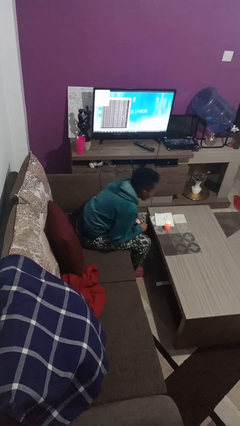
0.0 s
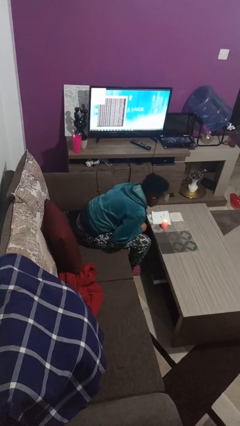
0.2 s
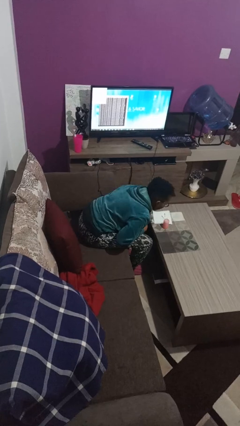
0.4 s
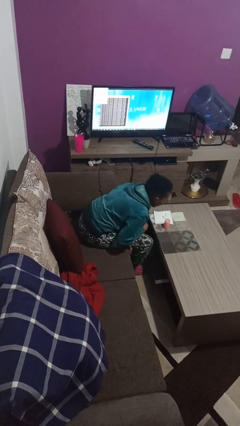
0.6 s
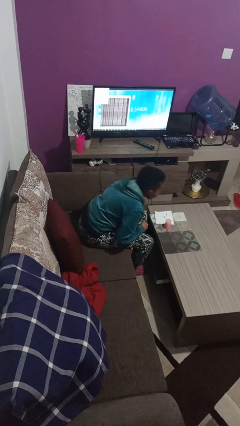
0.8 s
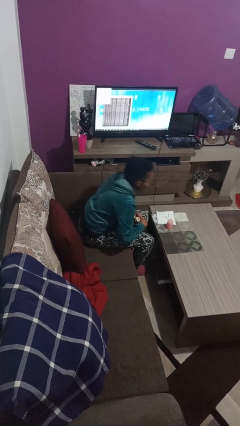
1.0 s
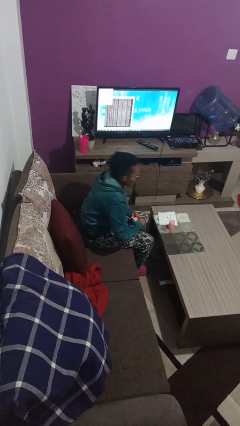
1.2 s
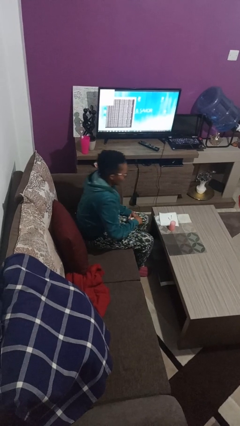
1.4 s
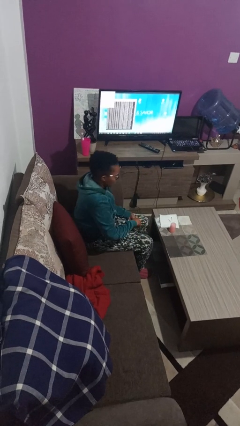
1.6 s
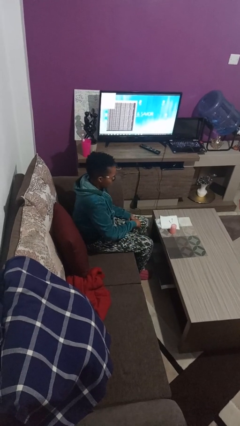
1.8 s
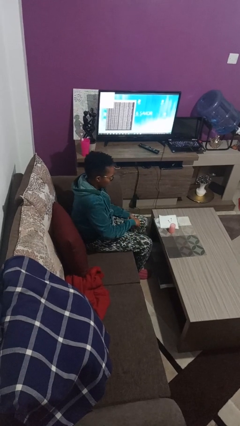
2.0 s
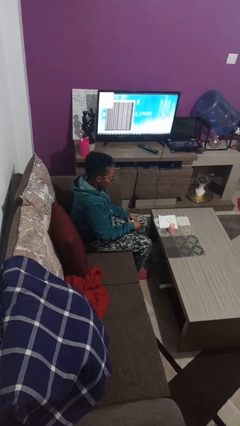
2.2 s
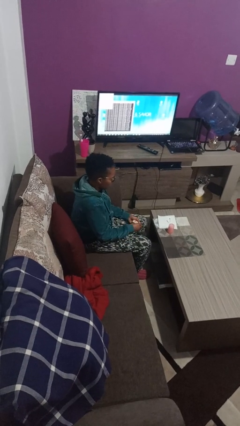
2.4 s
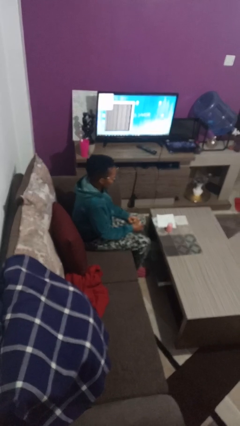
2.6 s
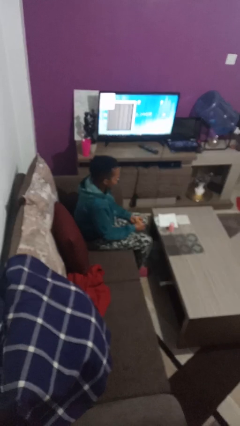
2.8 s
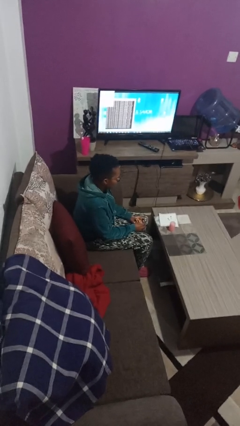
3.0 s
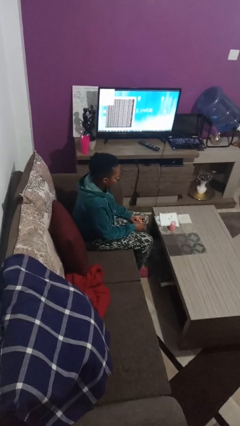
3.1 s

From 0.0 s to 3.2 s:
person extinguishes candle

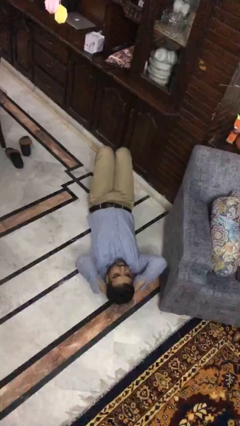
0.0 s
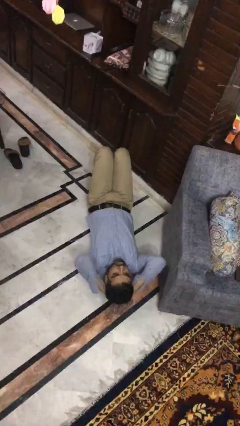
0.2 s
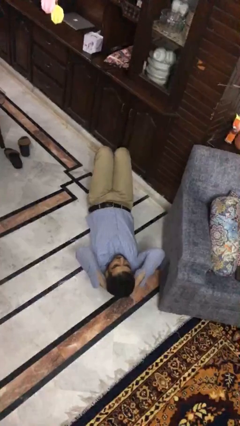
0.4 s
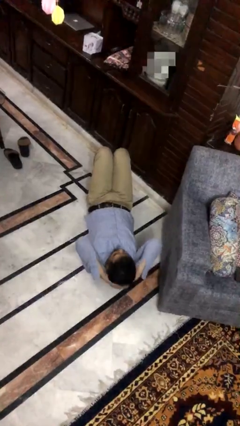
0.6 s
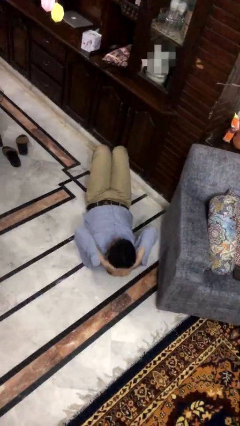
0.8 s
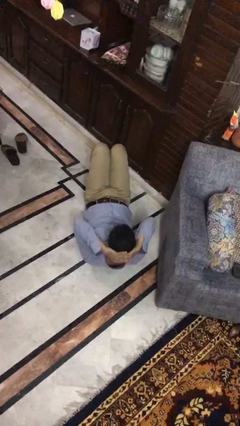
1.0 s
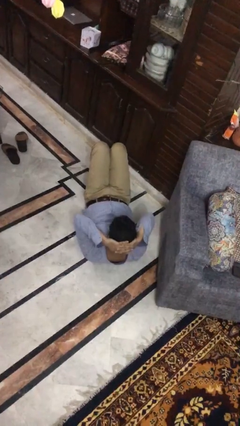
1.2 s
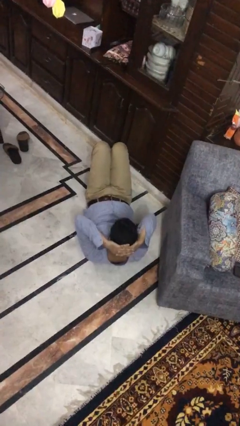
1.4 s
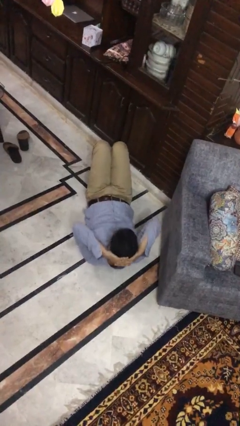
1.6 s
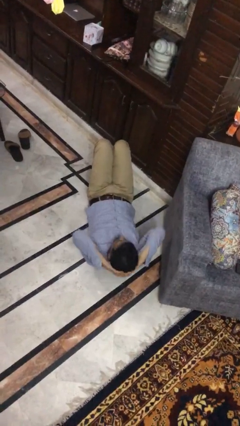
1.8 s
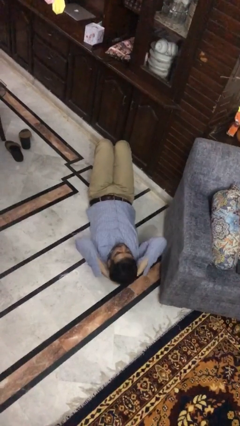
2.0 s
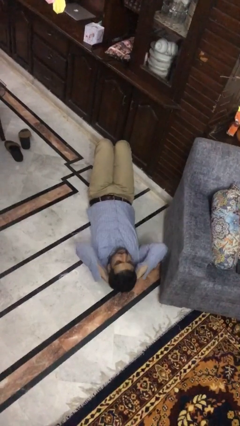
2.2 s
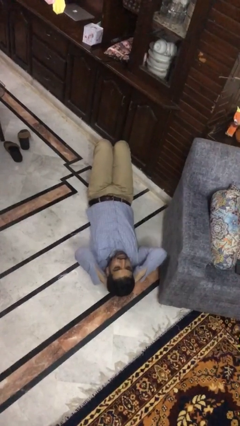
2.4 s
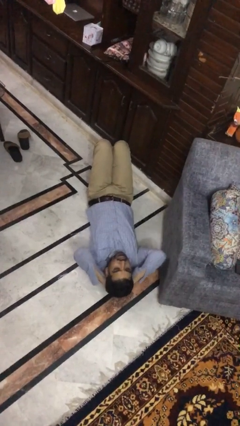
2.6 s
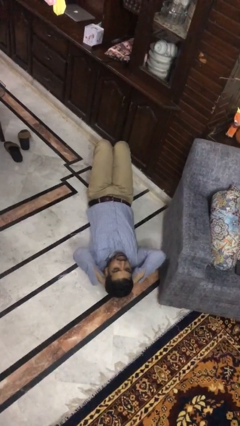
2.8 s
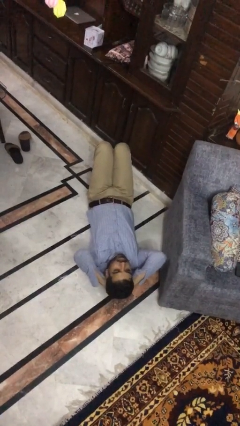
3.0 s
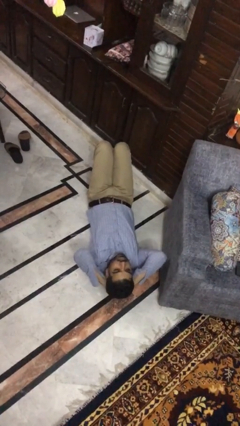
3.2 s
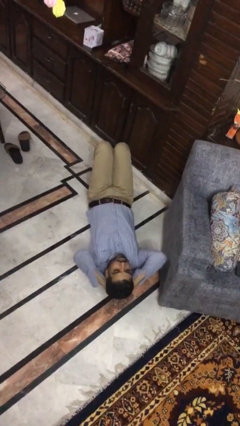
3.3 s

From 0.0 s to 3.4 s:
person exercises with situp

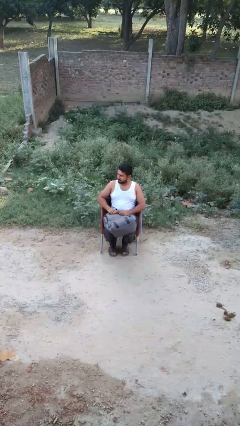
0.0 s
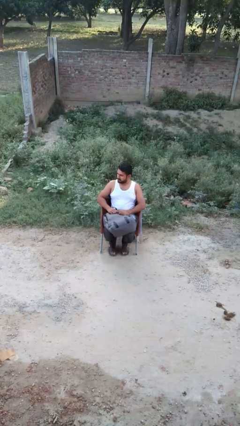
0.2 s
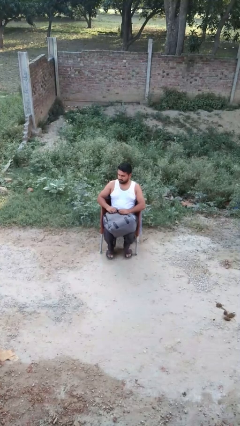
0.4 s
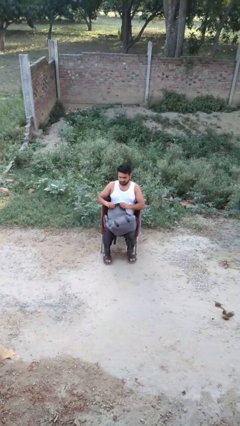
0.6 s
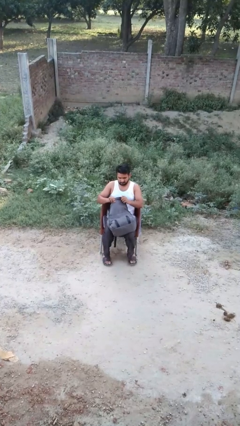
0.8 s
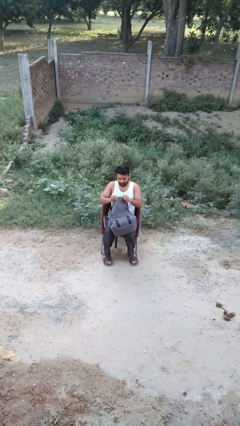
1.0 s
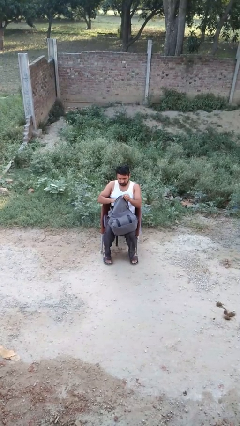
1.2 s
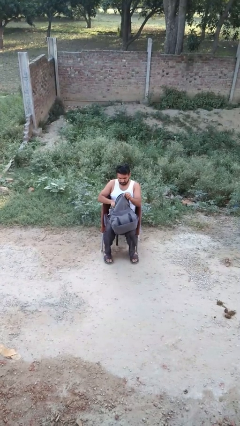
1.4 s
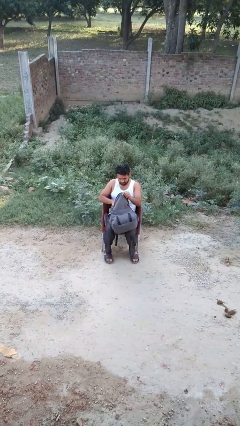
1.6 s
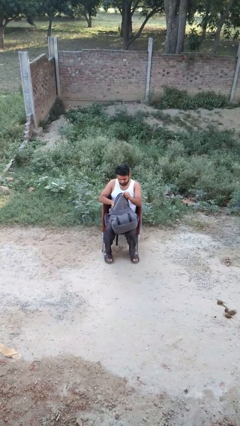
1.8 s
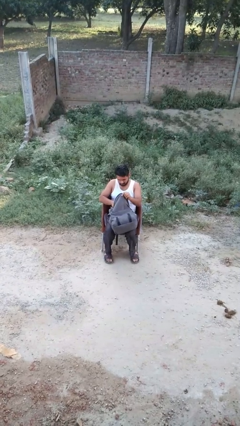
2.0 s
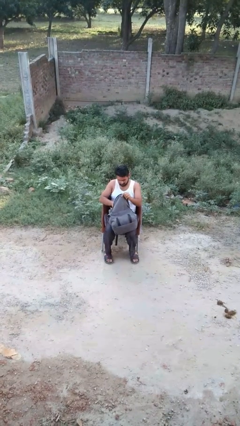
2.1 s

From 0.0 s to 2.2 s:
person searches in backpack

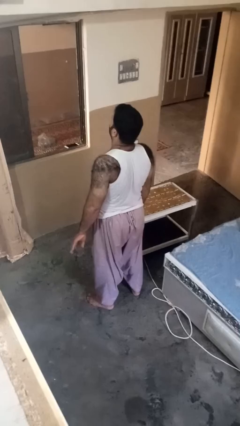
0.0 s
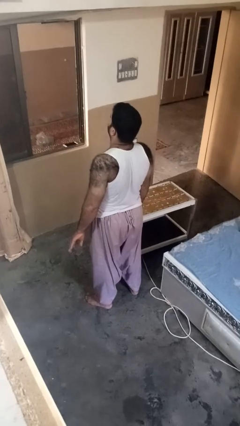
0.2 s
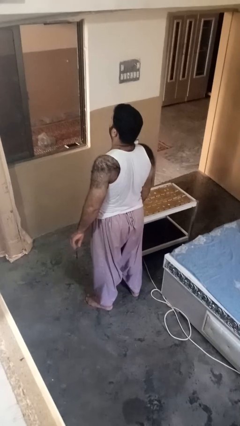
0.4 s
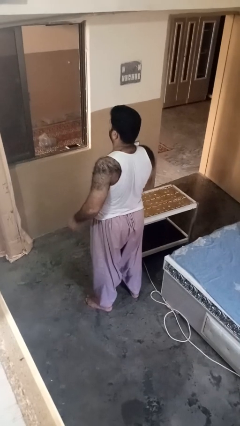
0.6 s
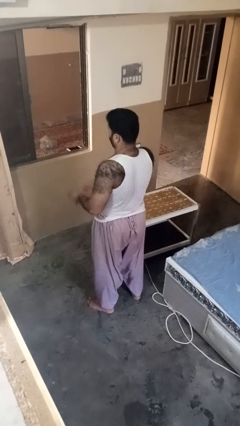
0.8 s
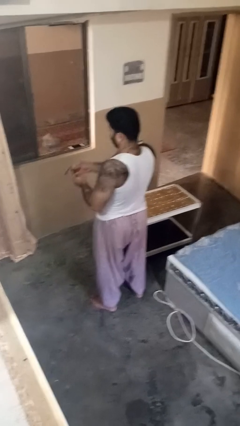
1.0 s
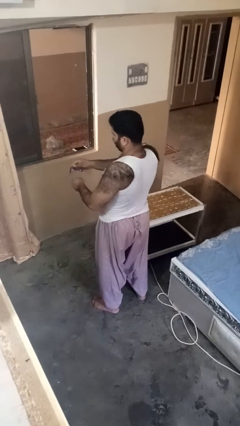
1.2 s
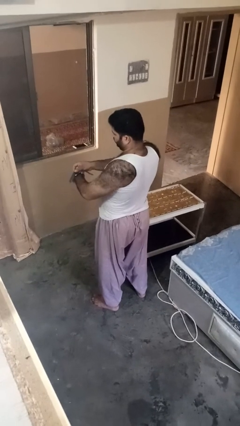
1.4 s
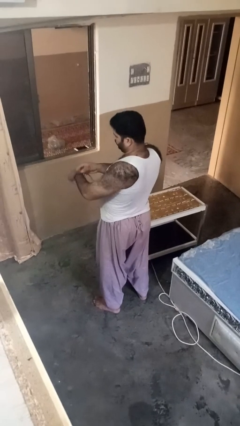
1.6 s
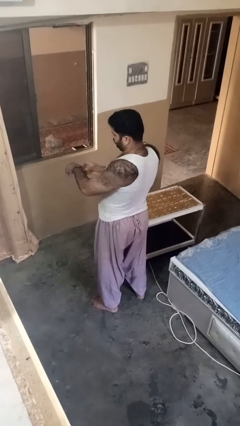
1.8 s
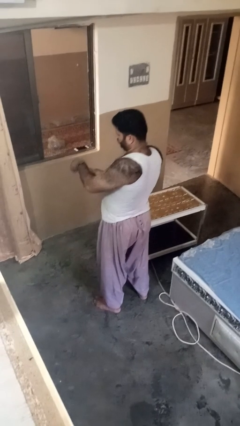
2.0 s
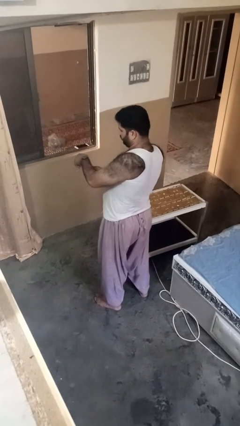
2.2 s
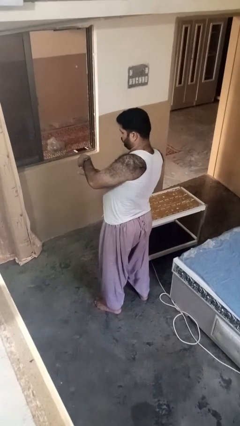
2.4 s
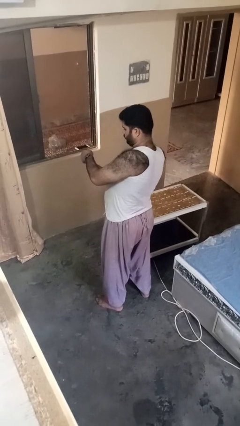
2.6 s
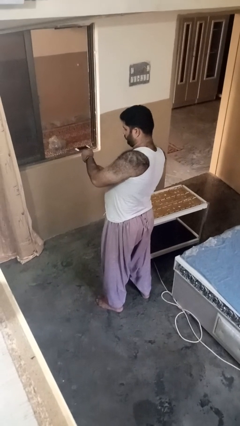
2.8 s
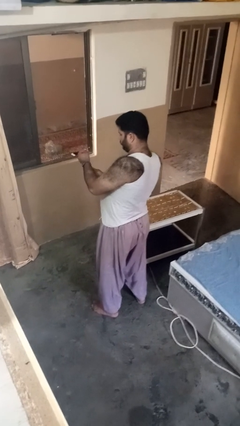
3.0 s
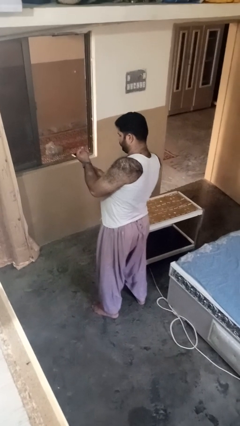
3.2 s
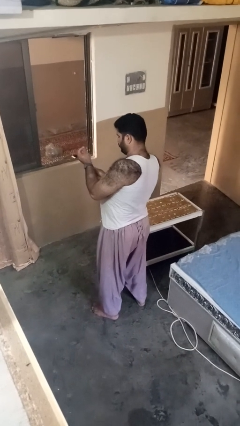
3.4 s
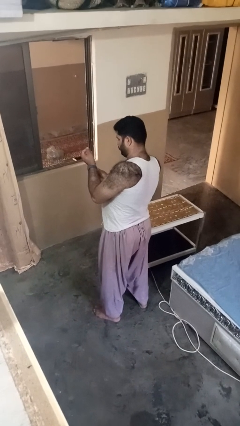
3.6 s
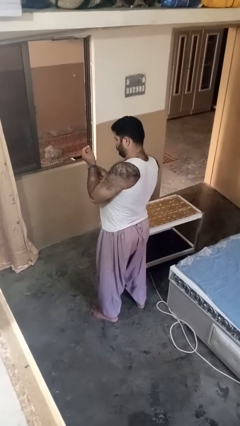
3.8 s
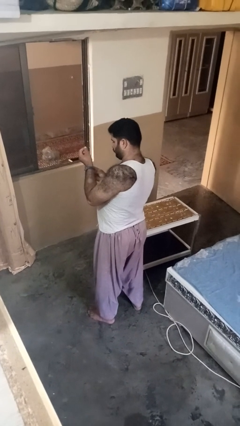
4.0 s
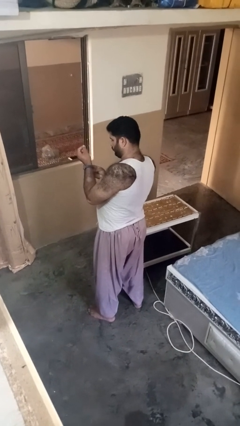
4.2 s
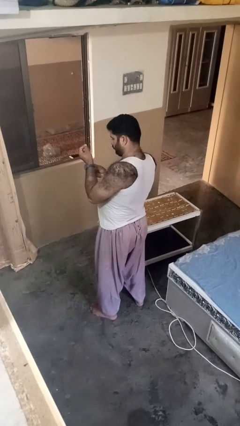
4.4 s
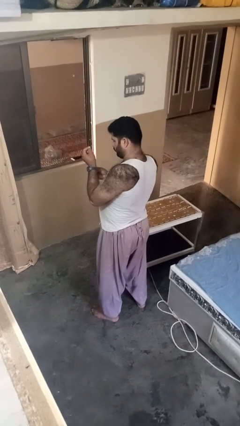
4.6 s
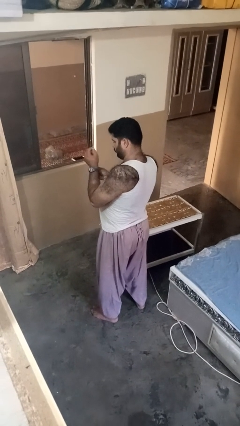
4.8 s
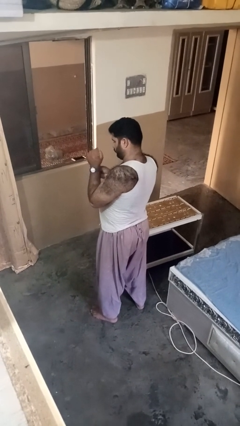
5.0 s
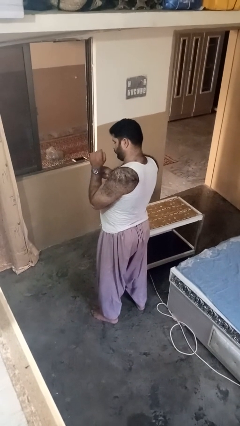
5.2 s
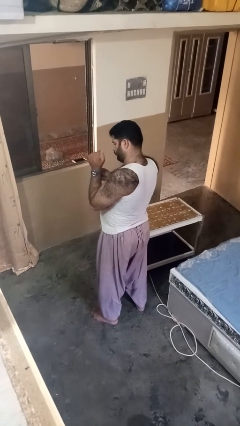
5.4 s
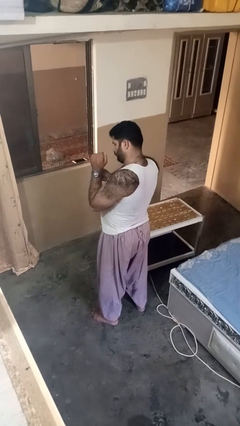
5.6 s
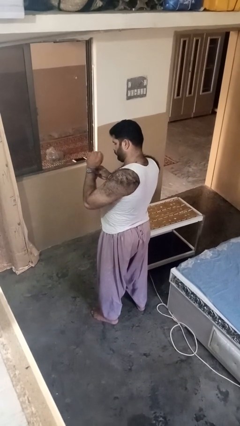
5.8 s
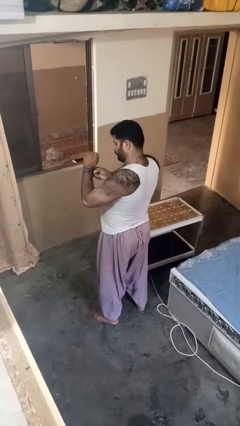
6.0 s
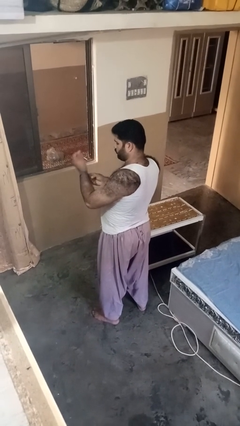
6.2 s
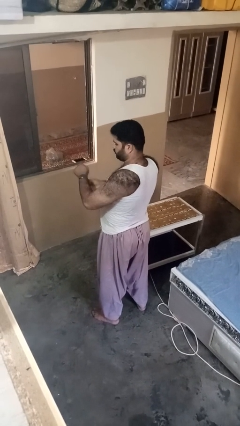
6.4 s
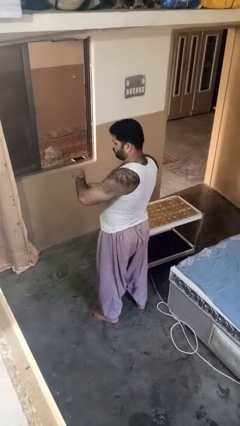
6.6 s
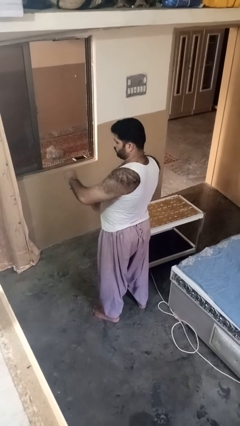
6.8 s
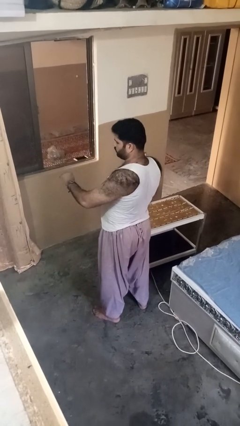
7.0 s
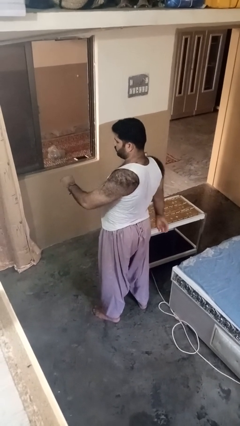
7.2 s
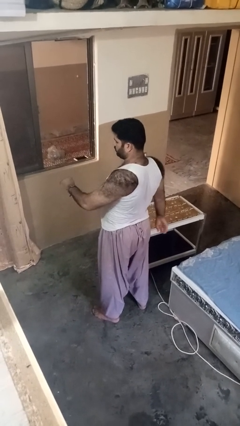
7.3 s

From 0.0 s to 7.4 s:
person puts on wristwatch

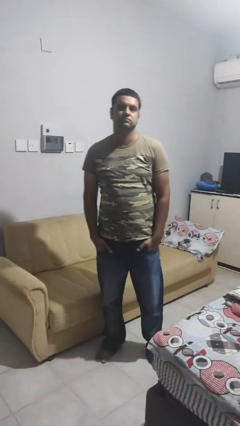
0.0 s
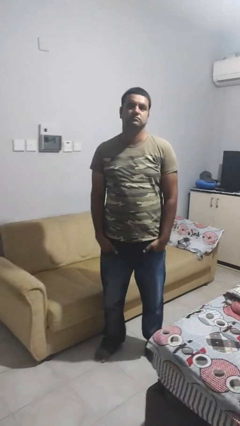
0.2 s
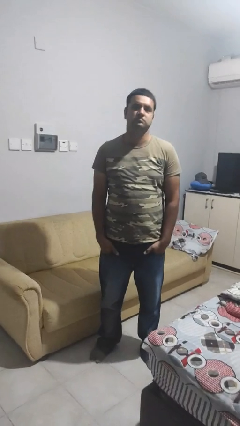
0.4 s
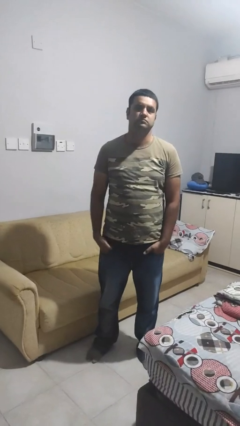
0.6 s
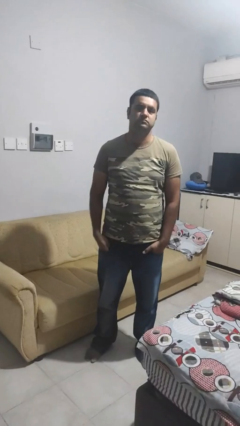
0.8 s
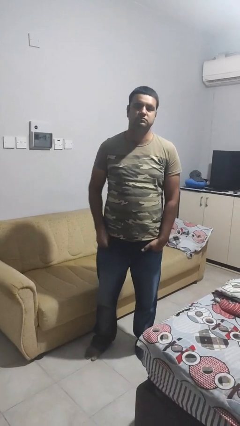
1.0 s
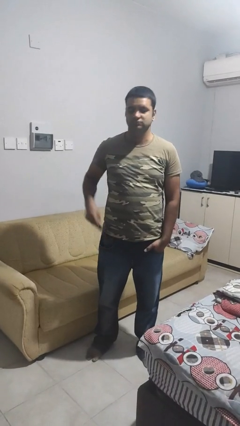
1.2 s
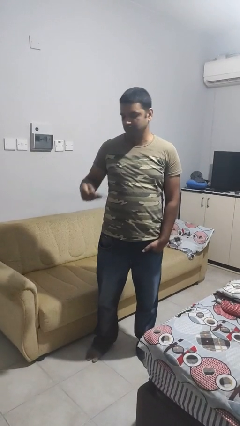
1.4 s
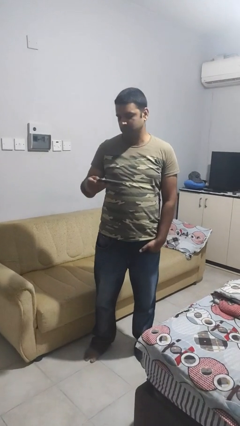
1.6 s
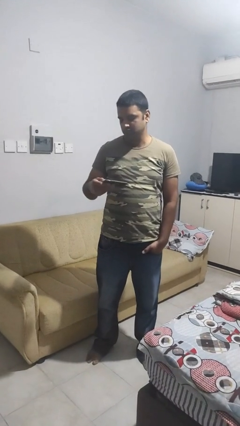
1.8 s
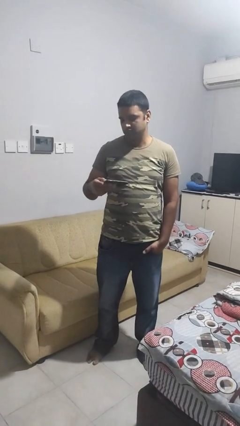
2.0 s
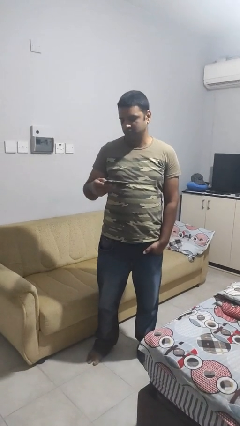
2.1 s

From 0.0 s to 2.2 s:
person takes phone from pocket
